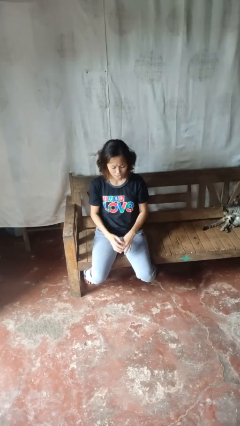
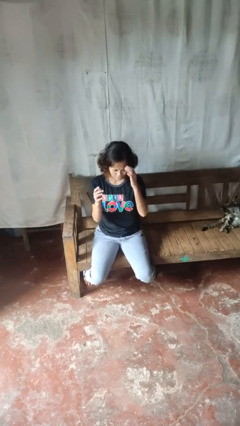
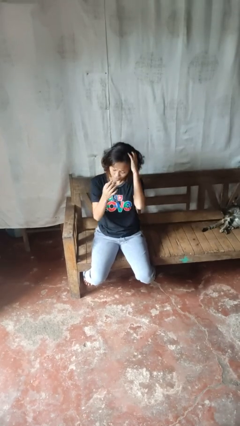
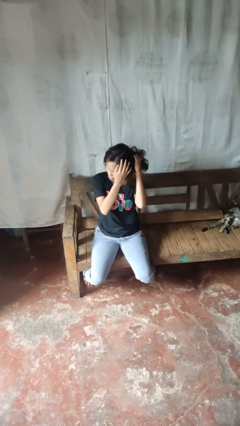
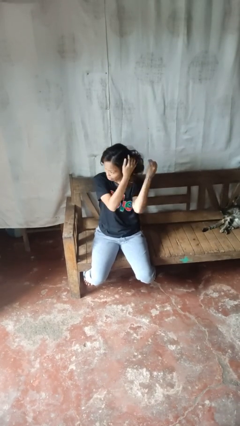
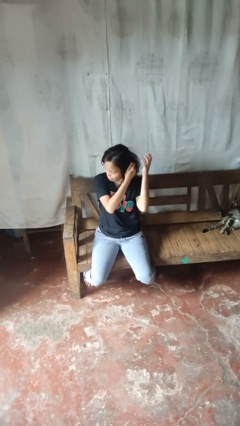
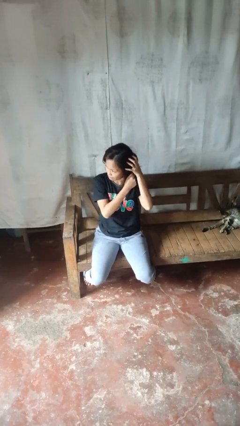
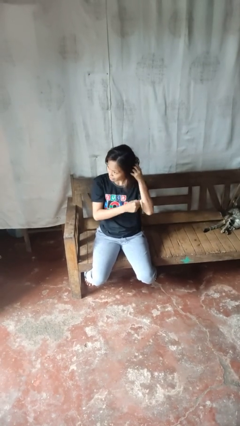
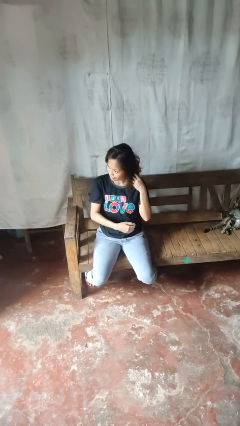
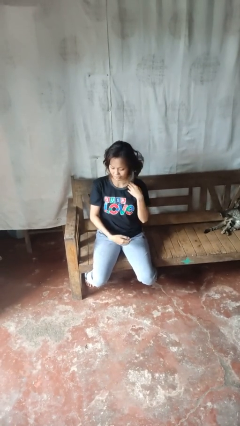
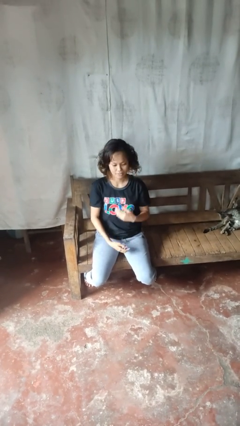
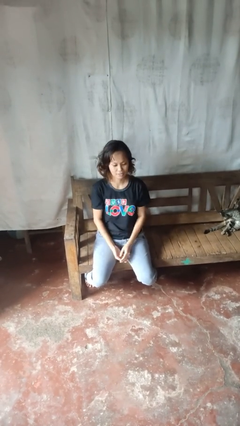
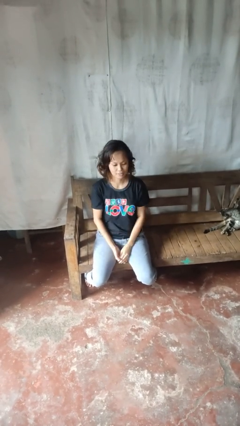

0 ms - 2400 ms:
person strokes hair

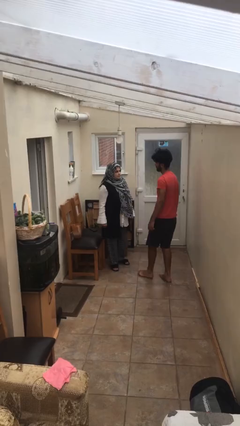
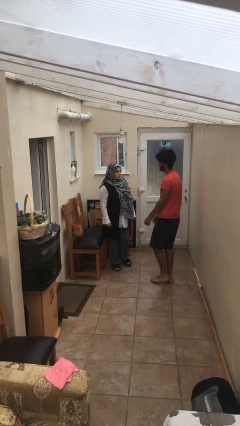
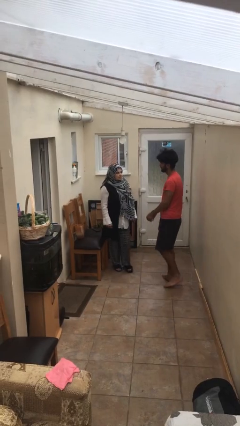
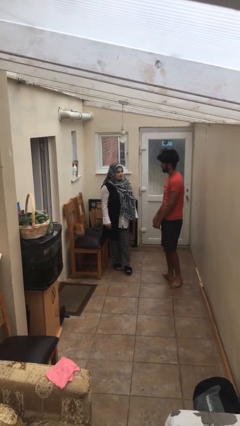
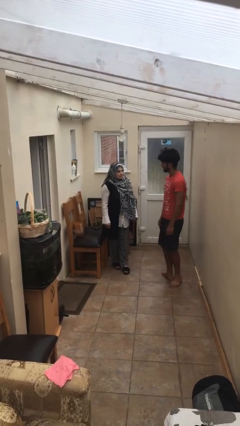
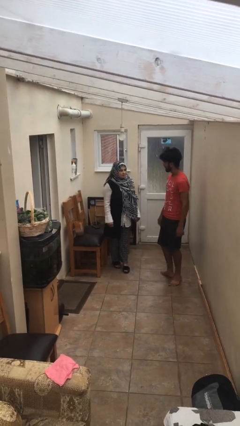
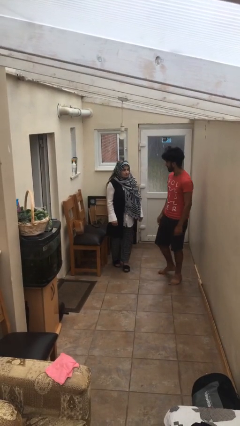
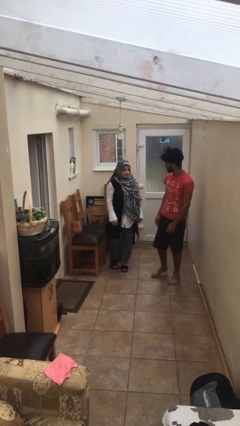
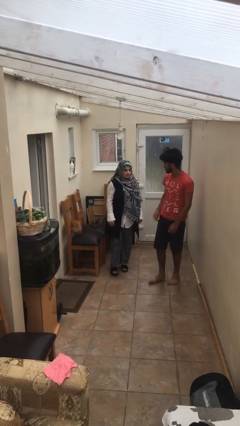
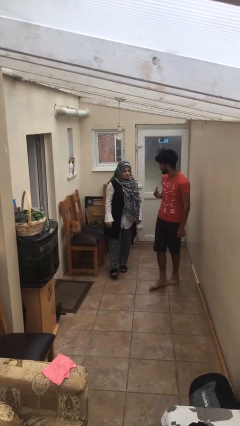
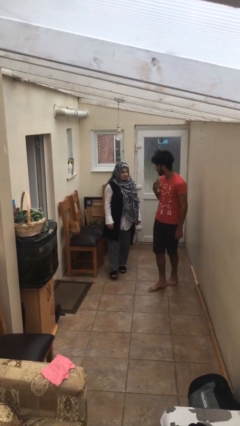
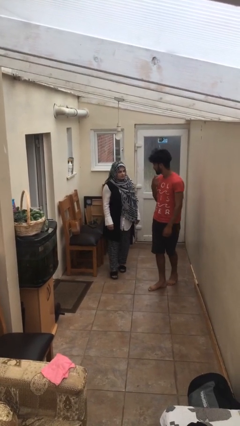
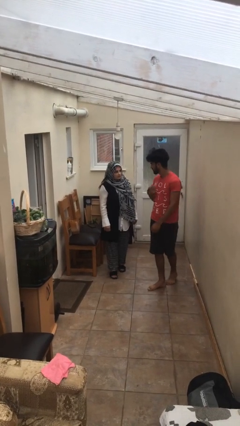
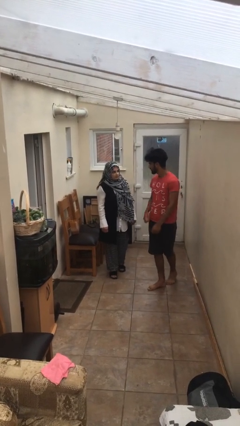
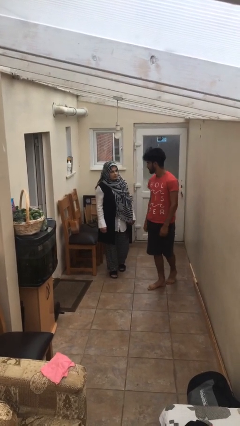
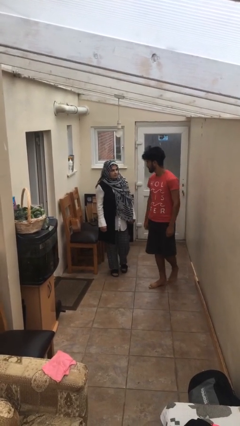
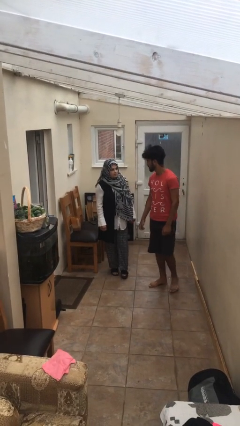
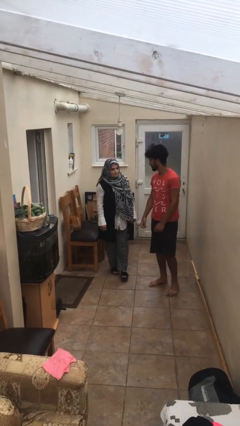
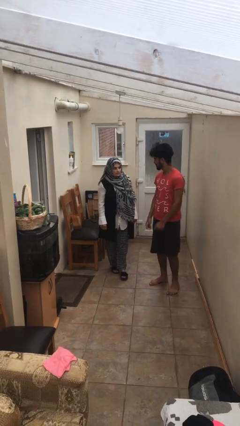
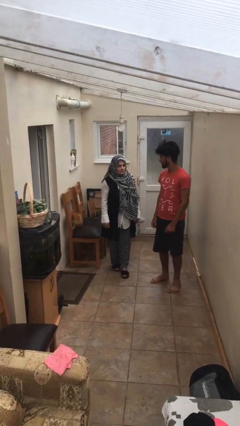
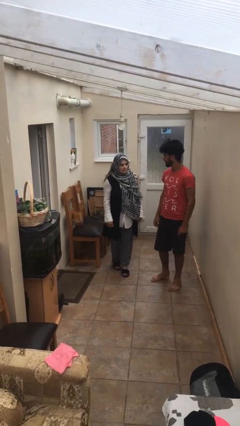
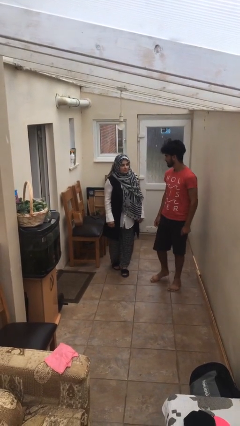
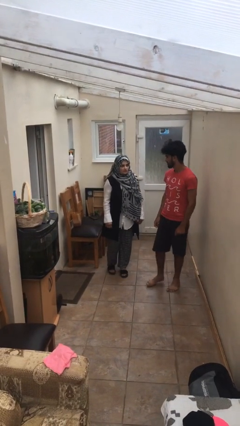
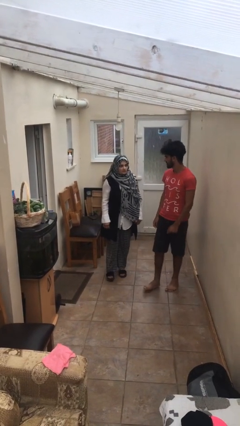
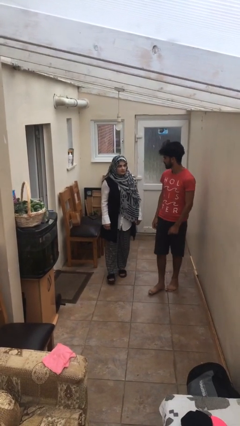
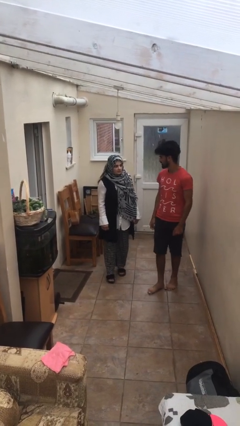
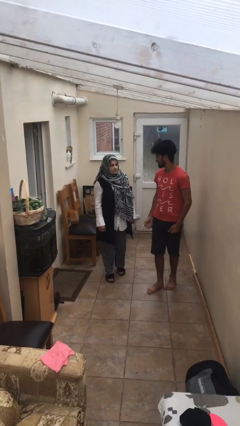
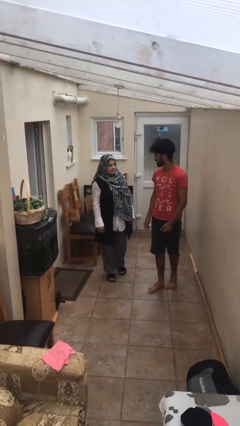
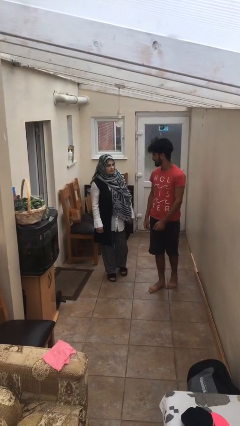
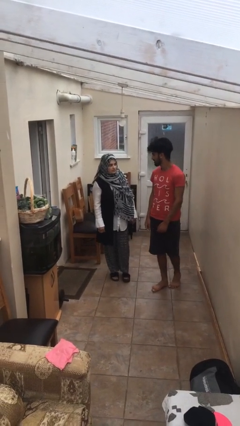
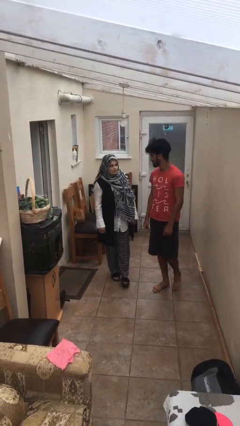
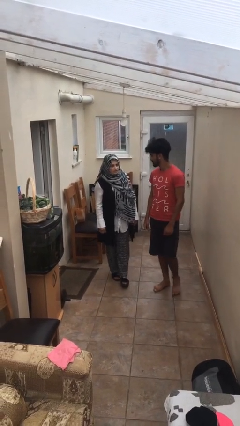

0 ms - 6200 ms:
person talks to person

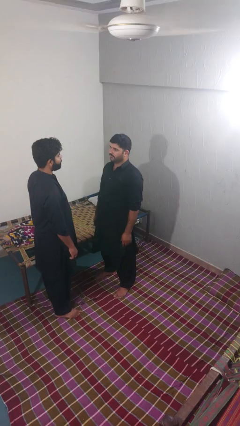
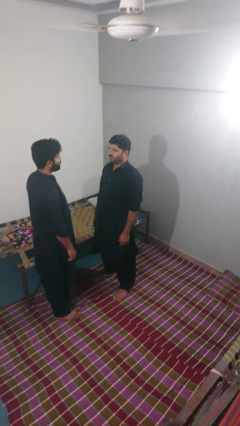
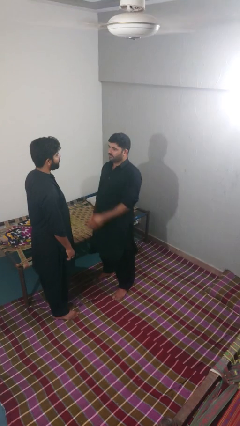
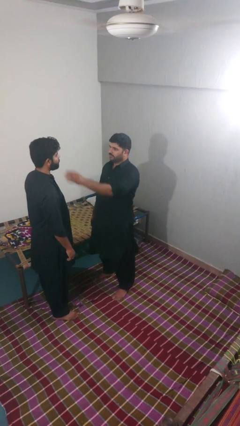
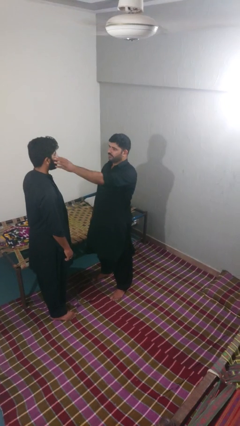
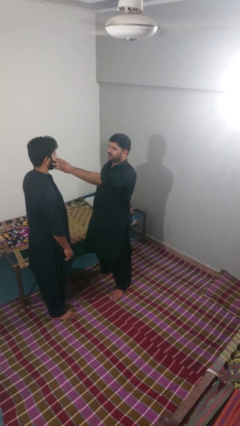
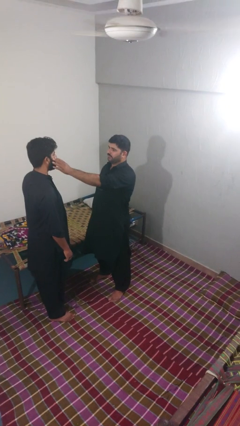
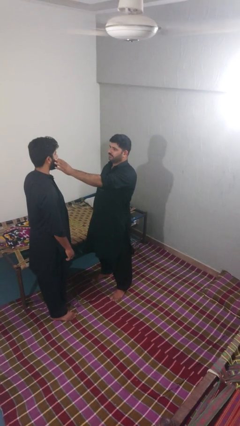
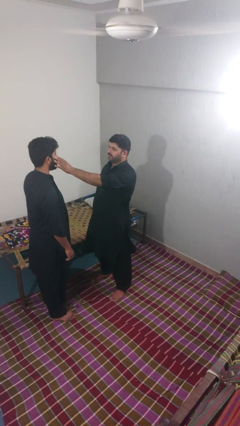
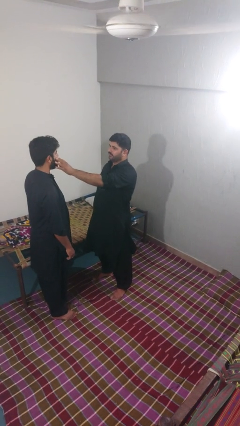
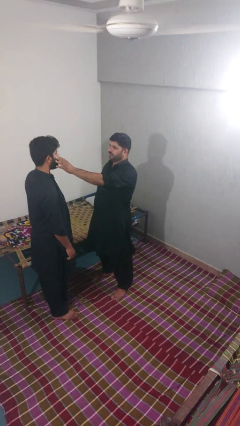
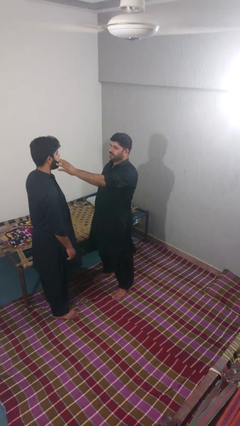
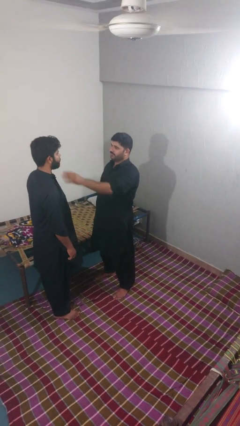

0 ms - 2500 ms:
person touches face of person

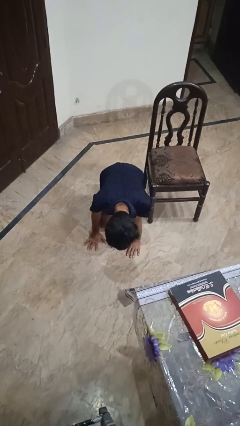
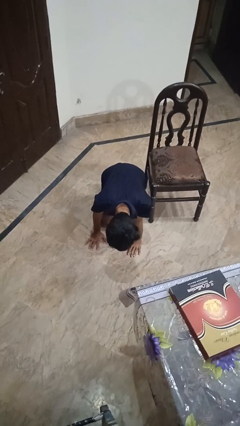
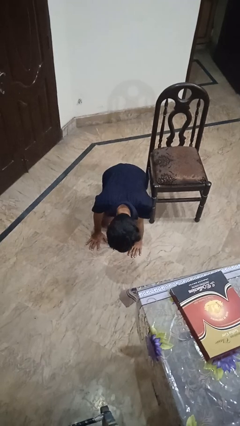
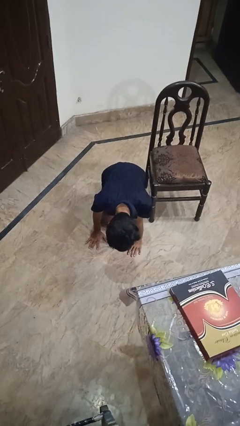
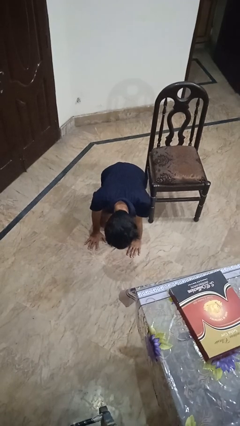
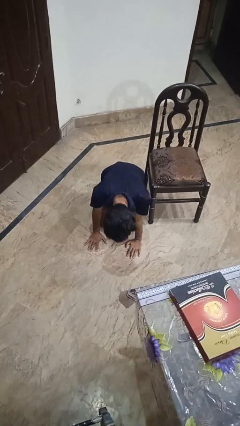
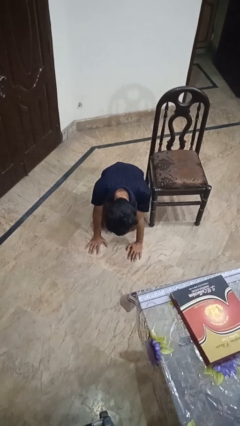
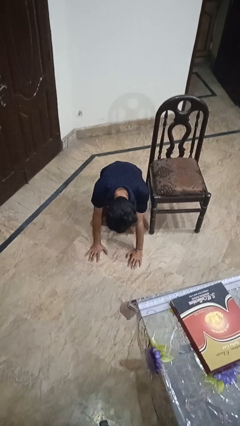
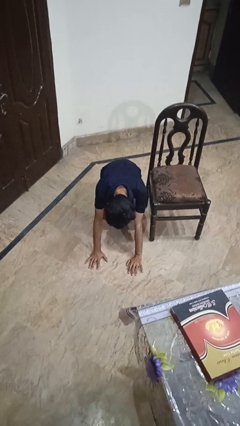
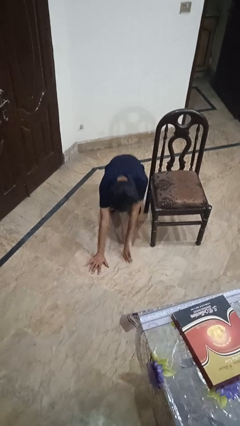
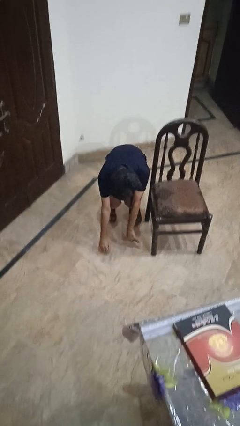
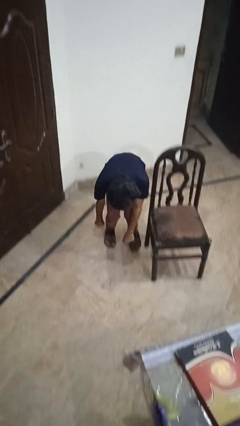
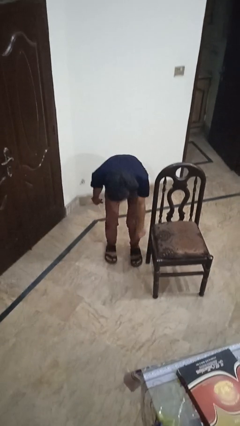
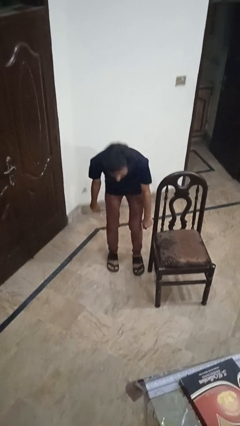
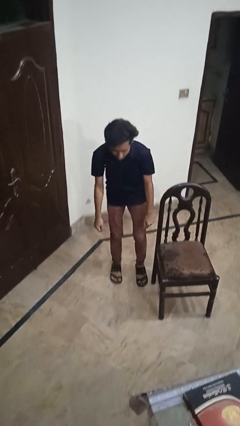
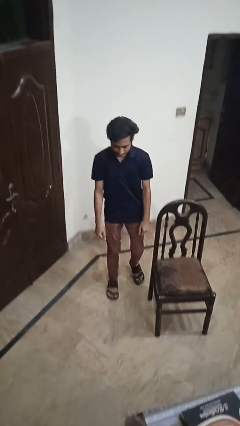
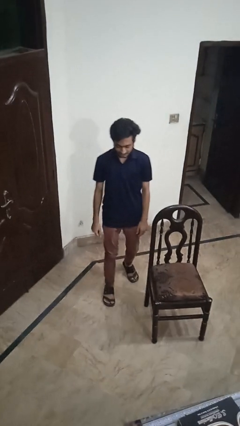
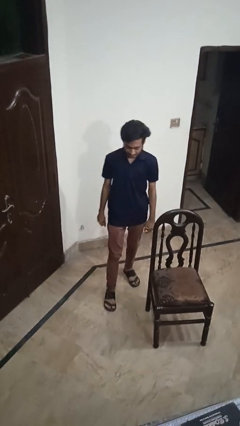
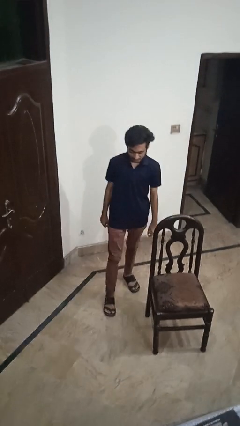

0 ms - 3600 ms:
person stands up from floor

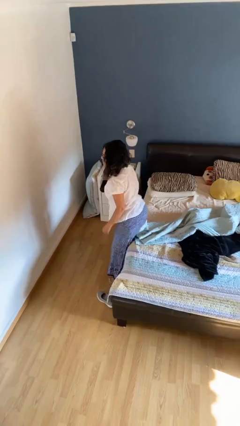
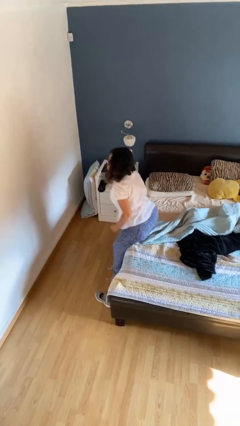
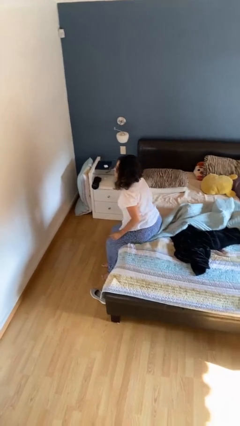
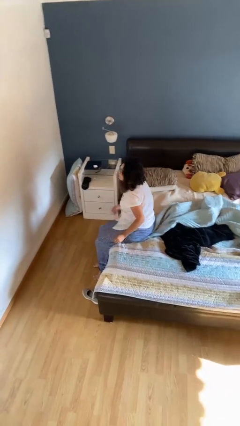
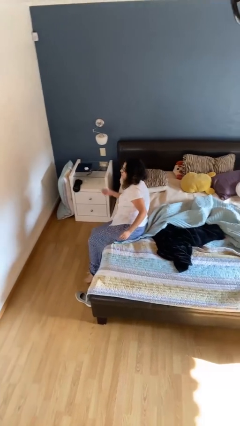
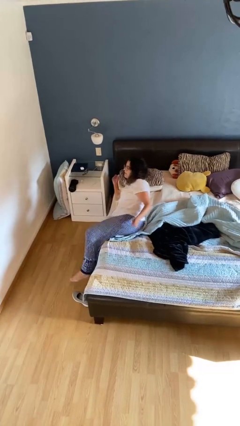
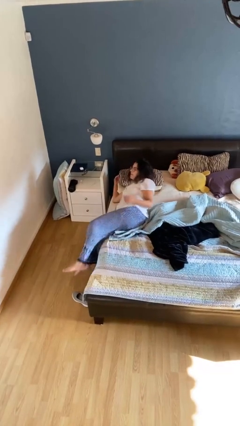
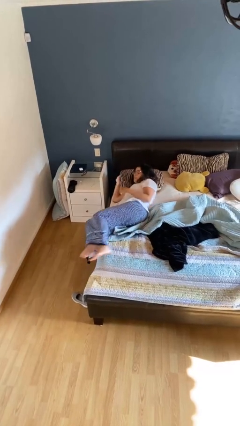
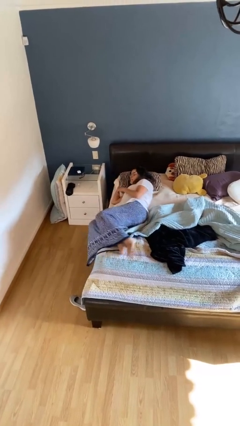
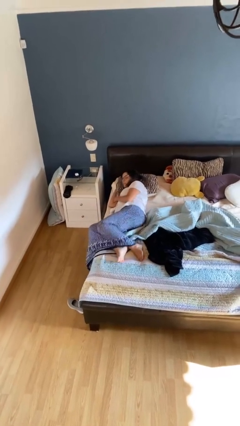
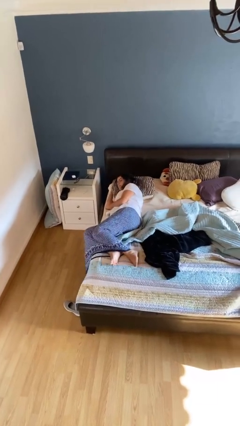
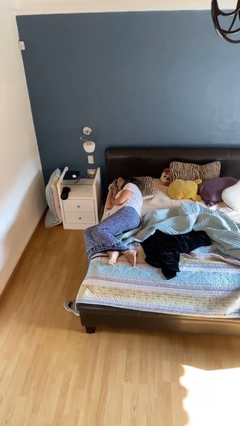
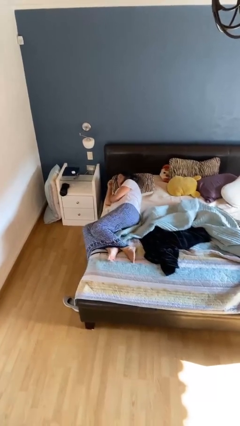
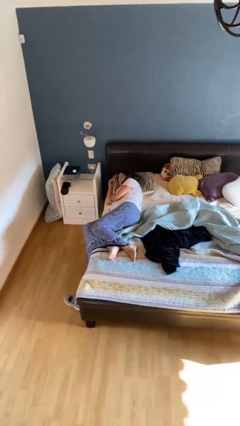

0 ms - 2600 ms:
person lies down on bed
